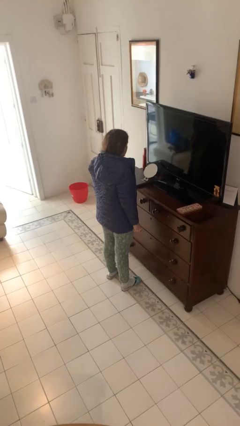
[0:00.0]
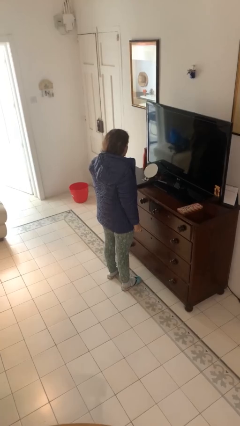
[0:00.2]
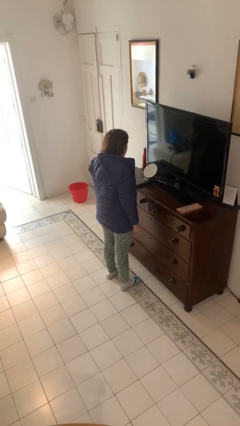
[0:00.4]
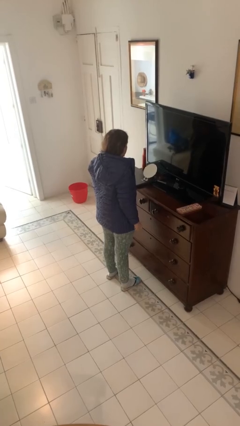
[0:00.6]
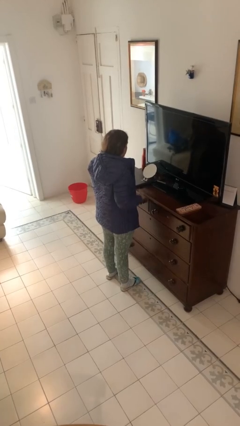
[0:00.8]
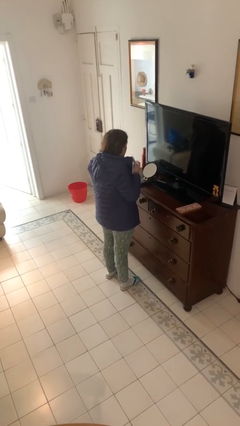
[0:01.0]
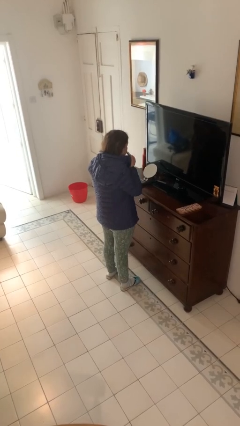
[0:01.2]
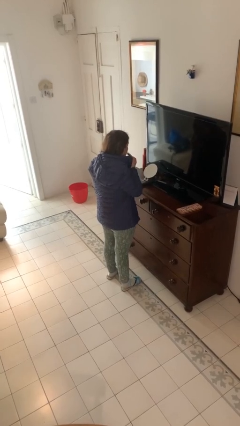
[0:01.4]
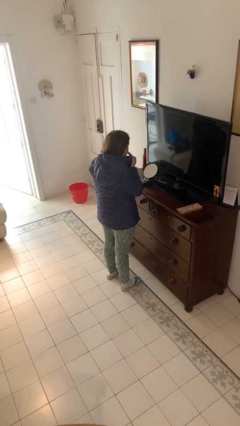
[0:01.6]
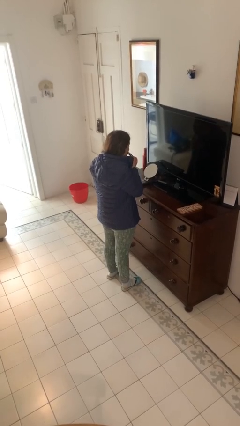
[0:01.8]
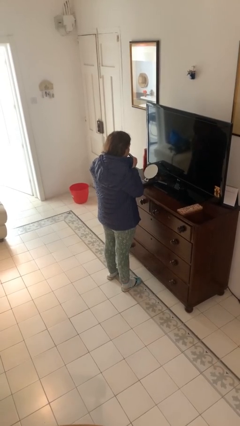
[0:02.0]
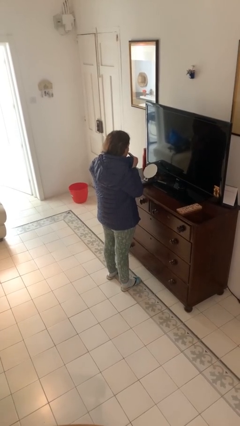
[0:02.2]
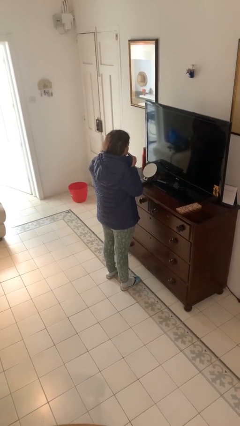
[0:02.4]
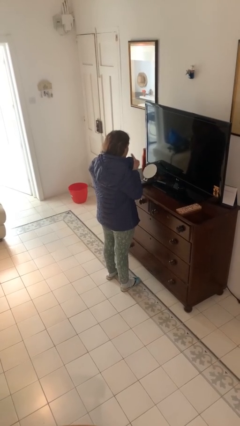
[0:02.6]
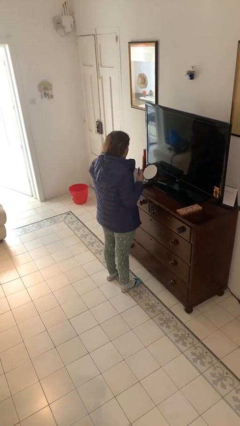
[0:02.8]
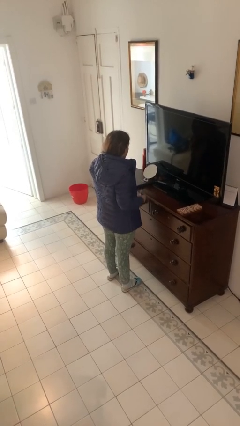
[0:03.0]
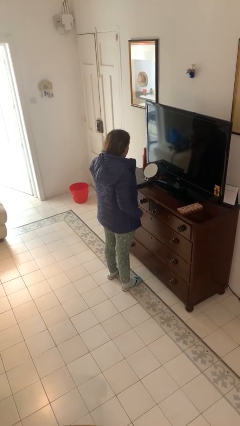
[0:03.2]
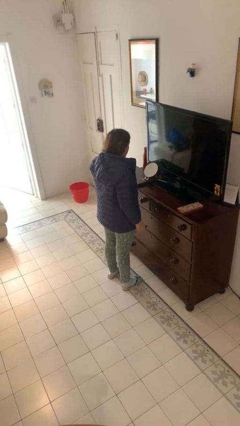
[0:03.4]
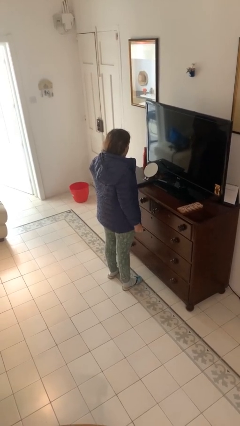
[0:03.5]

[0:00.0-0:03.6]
person applies lip makeup

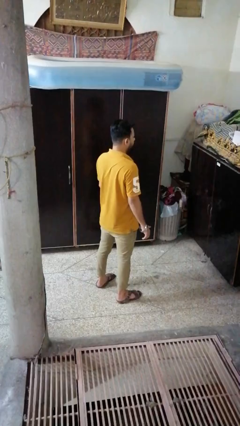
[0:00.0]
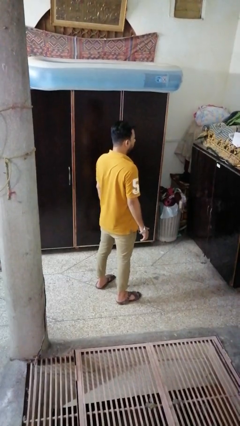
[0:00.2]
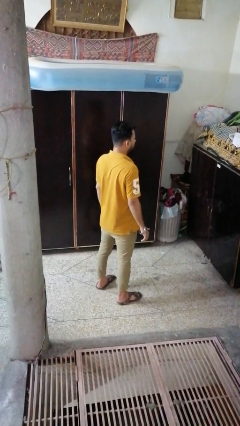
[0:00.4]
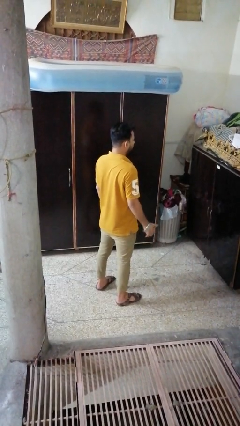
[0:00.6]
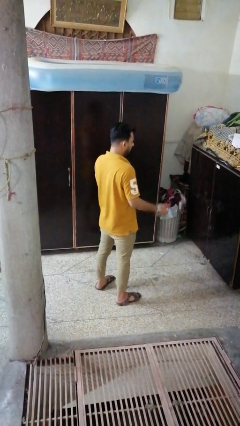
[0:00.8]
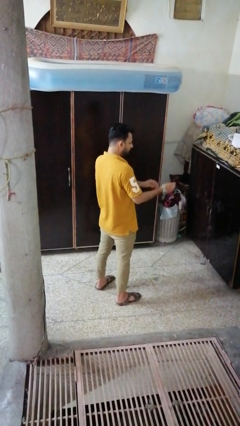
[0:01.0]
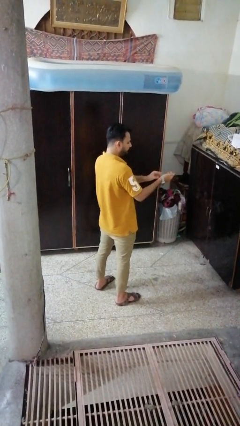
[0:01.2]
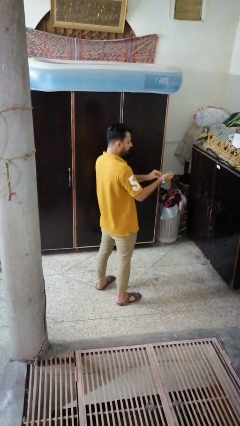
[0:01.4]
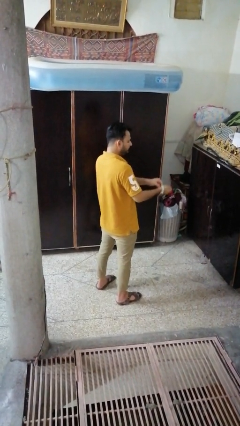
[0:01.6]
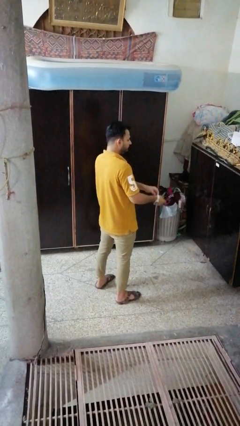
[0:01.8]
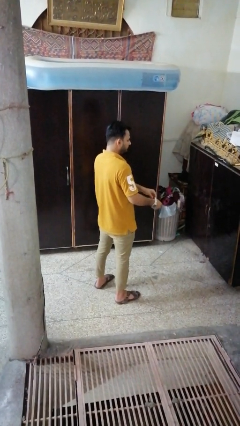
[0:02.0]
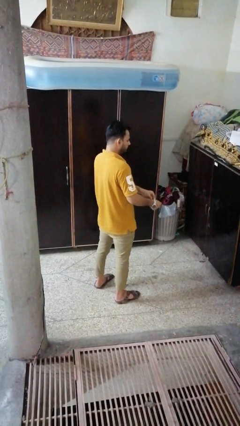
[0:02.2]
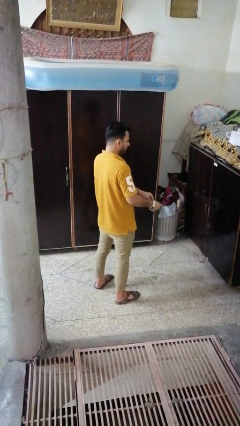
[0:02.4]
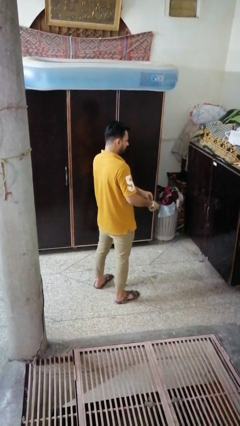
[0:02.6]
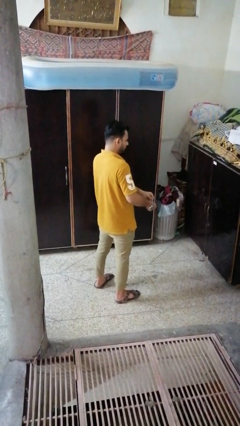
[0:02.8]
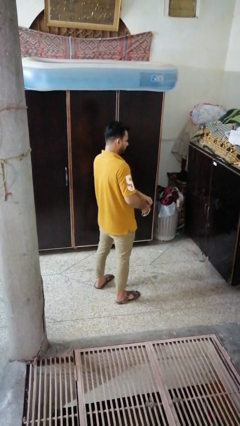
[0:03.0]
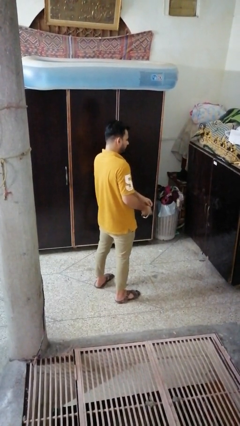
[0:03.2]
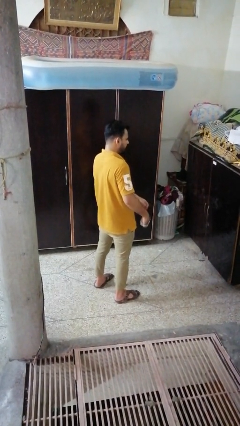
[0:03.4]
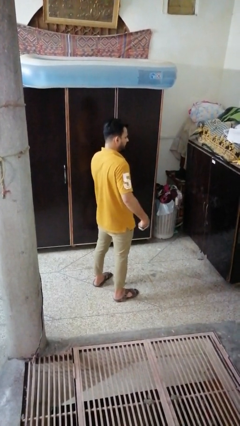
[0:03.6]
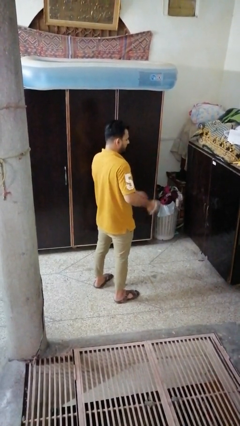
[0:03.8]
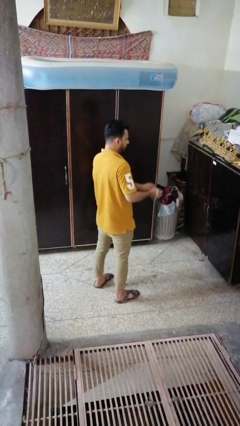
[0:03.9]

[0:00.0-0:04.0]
person takes off wristwatch

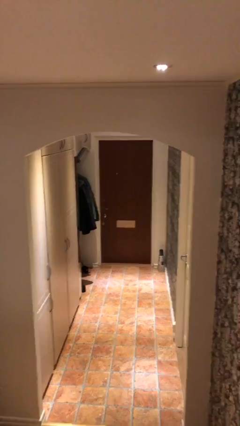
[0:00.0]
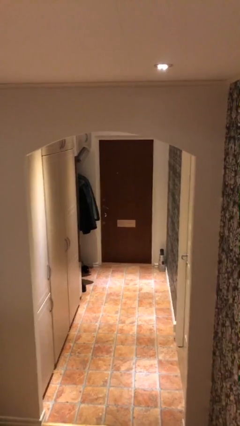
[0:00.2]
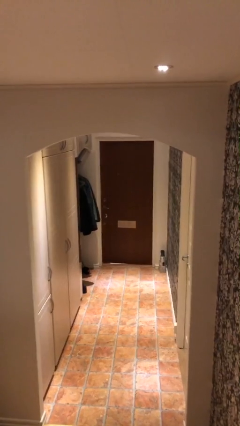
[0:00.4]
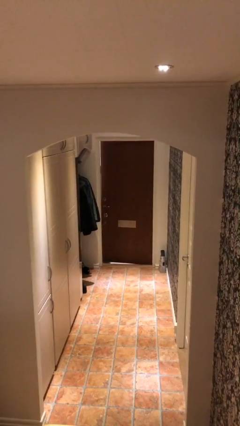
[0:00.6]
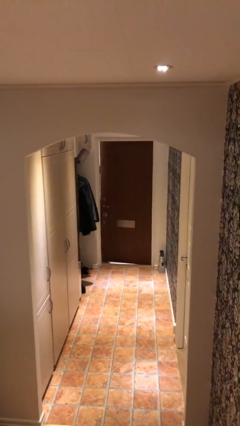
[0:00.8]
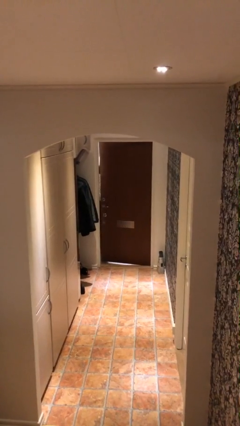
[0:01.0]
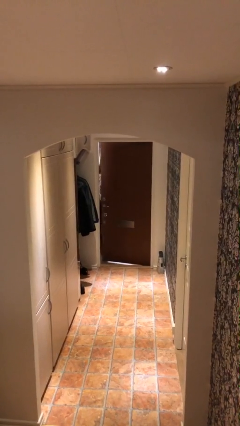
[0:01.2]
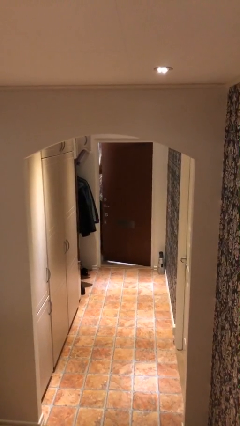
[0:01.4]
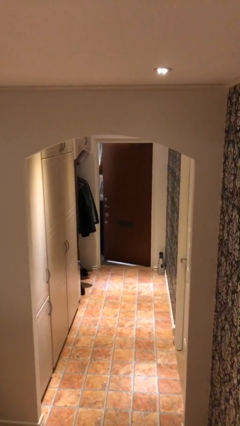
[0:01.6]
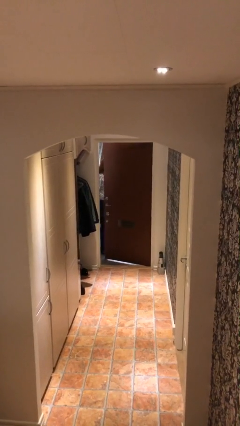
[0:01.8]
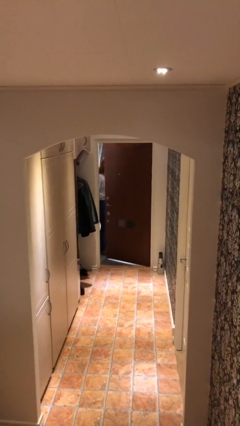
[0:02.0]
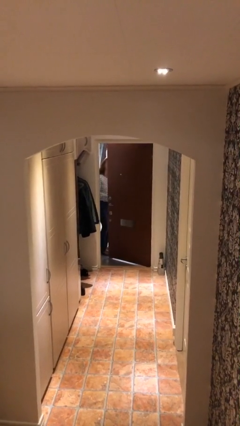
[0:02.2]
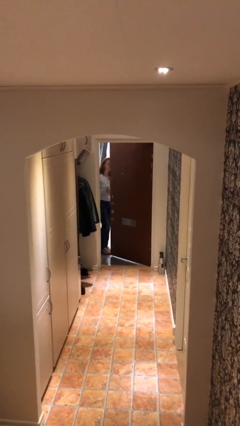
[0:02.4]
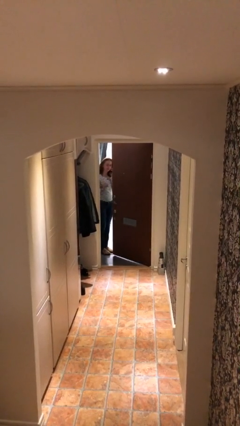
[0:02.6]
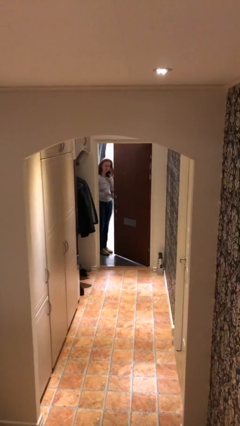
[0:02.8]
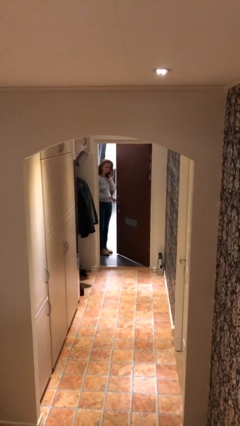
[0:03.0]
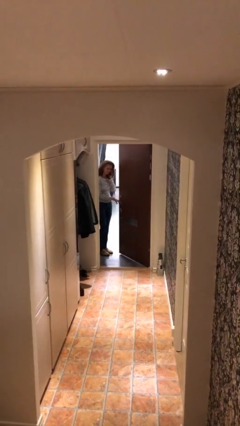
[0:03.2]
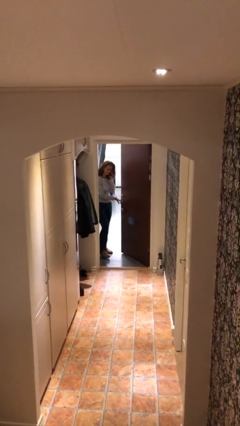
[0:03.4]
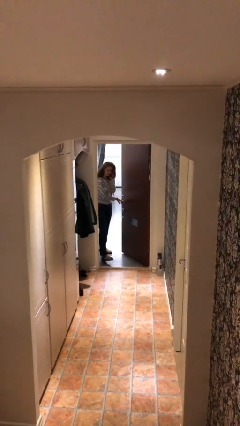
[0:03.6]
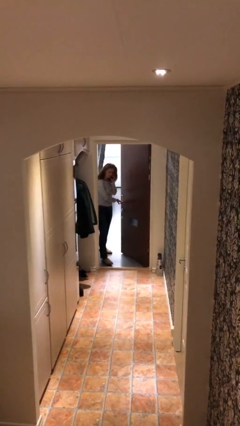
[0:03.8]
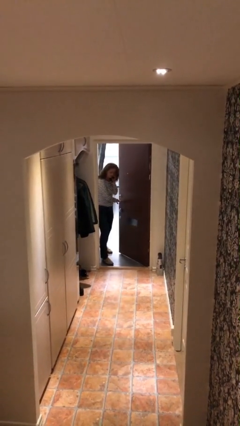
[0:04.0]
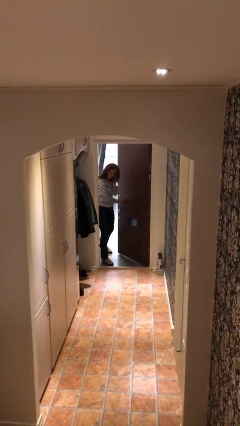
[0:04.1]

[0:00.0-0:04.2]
person opens facility door

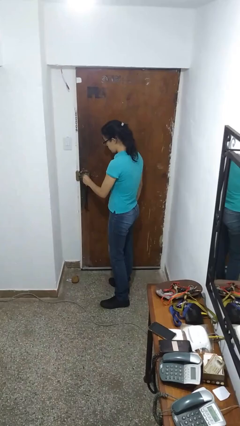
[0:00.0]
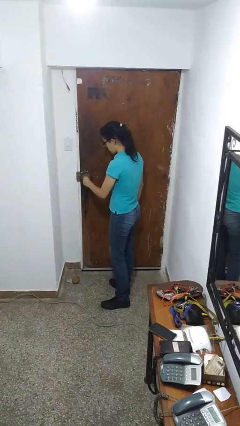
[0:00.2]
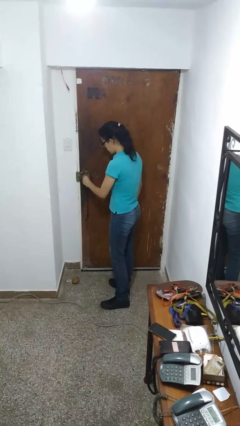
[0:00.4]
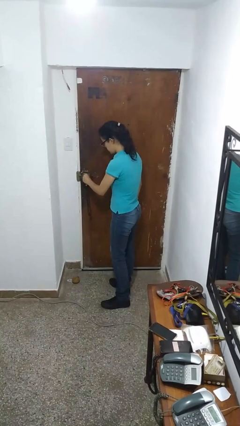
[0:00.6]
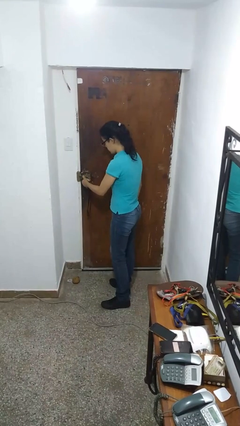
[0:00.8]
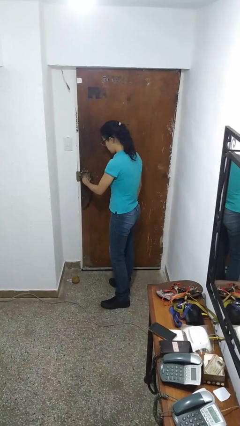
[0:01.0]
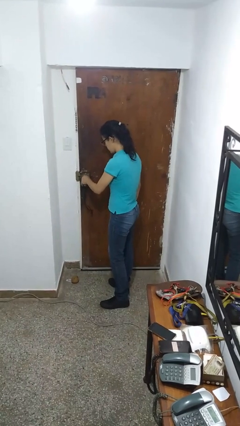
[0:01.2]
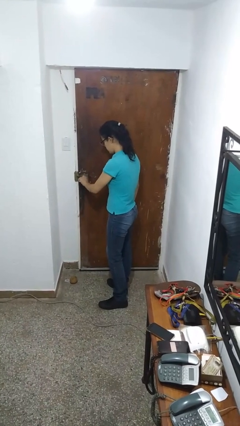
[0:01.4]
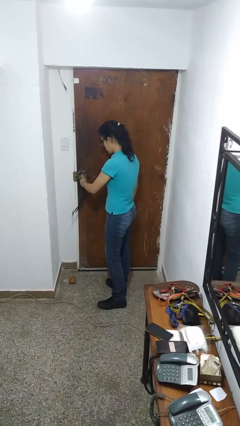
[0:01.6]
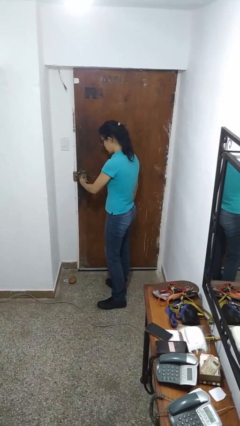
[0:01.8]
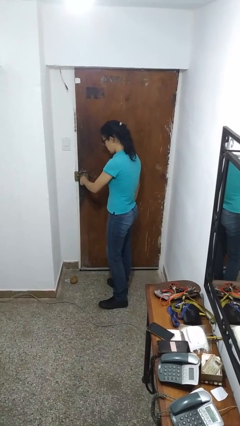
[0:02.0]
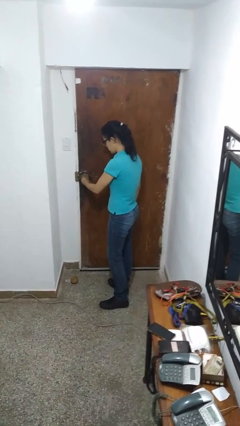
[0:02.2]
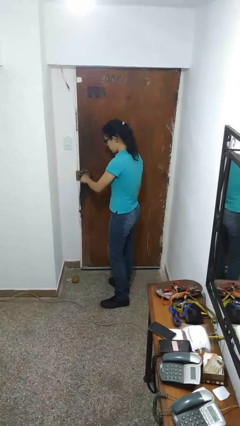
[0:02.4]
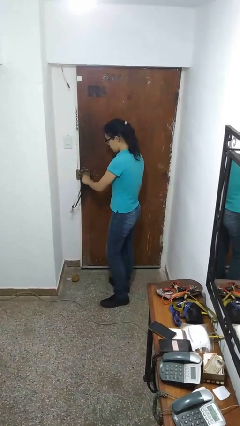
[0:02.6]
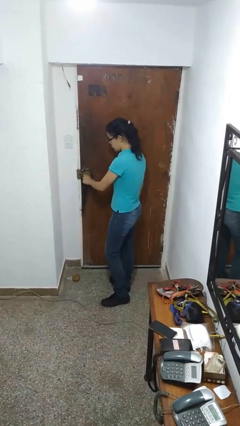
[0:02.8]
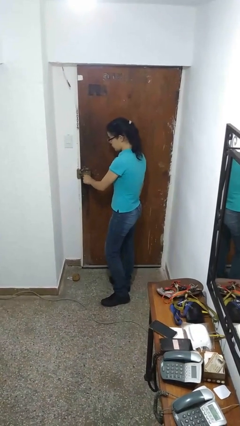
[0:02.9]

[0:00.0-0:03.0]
person locks door with keys

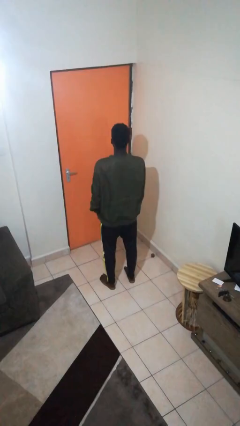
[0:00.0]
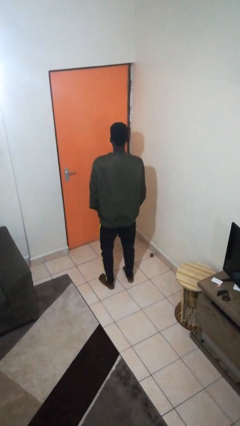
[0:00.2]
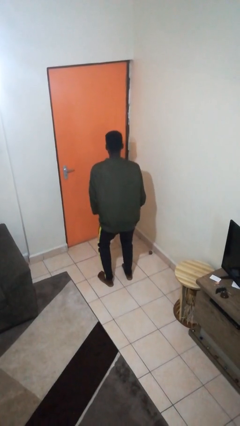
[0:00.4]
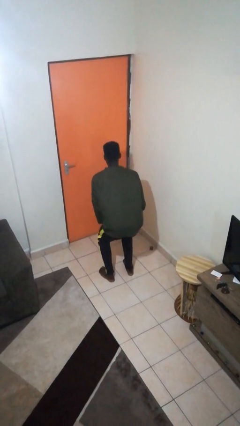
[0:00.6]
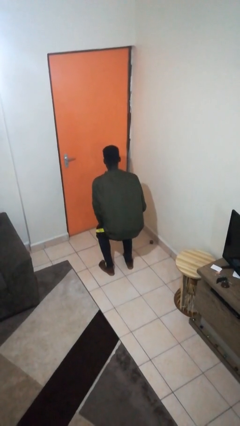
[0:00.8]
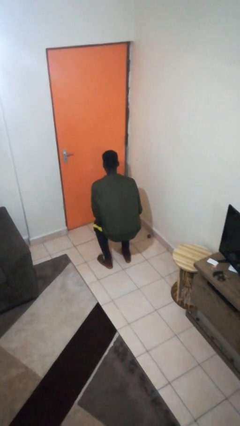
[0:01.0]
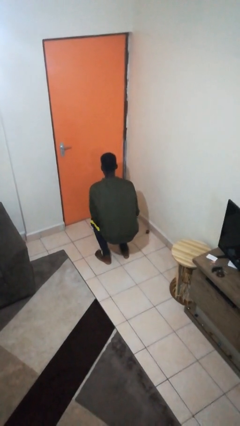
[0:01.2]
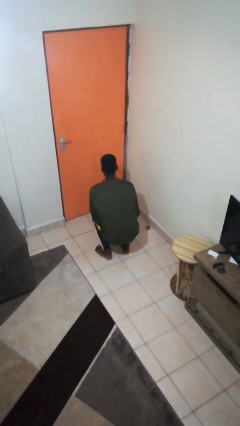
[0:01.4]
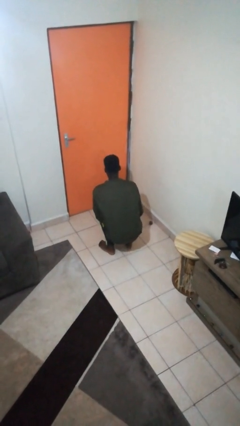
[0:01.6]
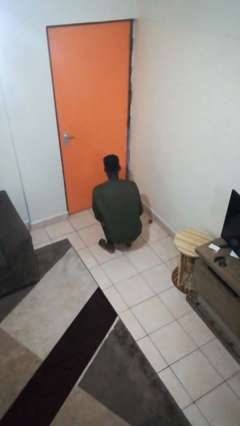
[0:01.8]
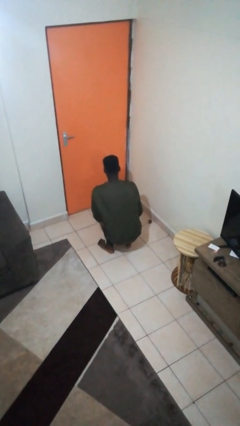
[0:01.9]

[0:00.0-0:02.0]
person squats

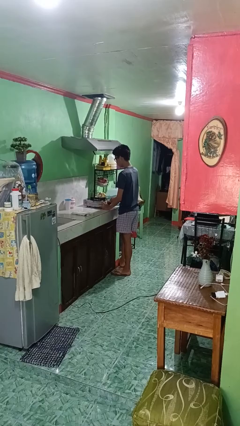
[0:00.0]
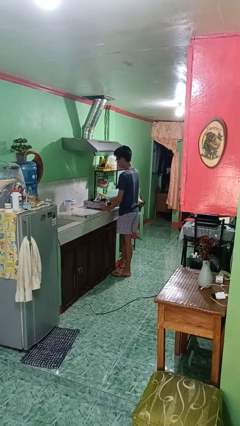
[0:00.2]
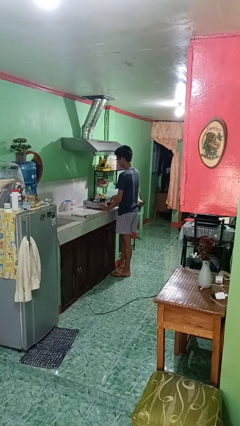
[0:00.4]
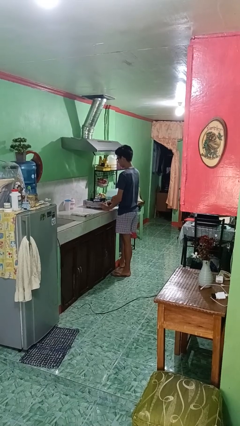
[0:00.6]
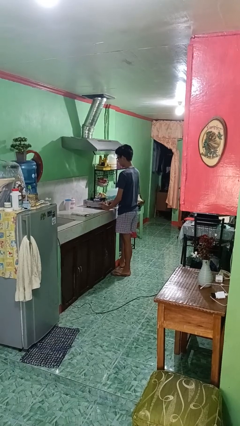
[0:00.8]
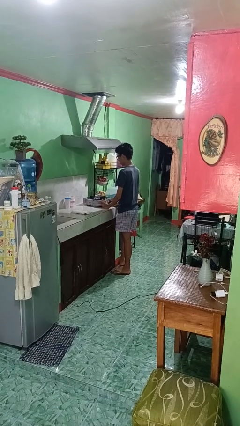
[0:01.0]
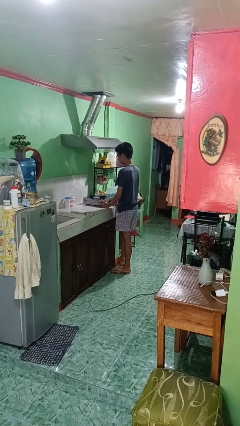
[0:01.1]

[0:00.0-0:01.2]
person turns on stovetop
